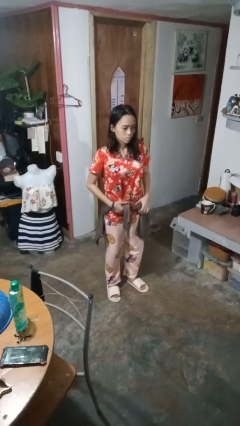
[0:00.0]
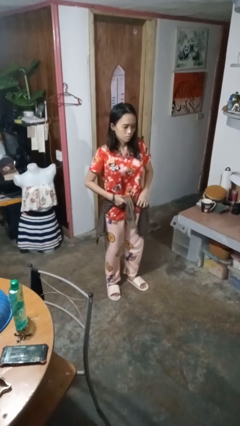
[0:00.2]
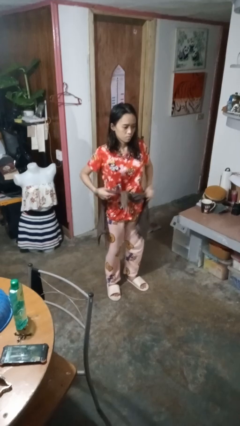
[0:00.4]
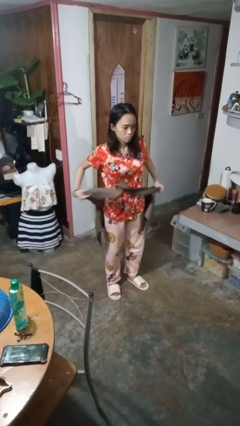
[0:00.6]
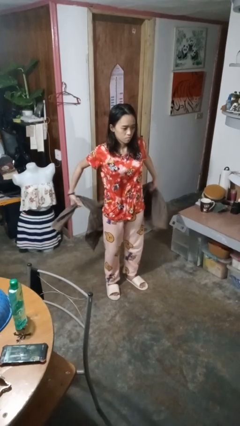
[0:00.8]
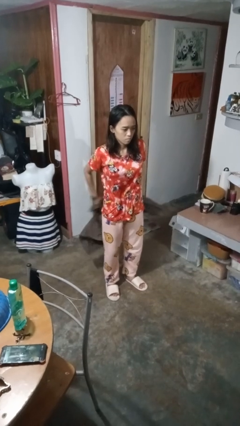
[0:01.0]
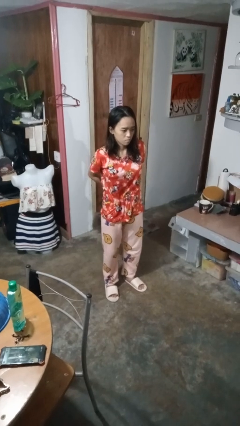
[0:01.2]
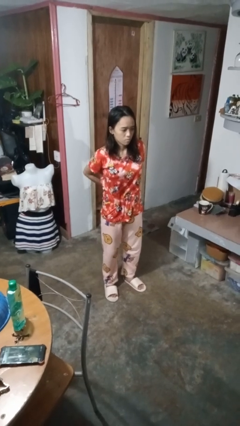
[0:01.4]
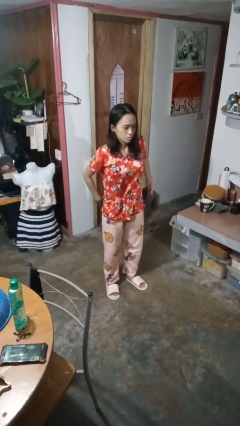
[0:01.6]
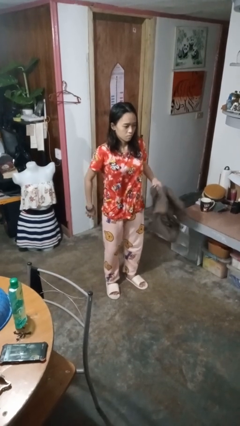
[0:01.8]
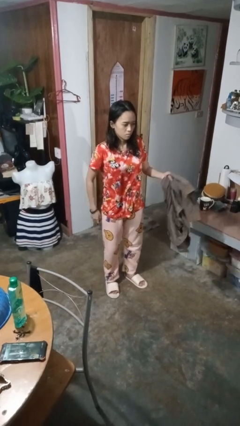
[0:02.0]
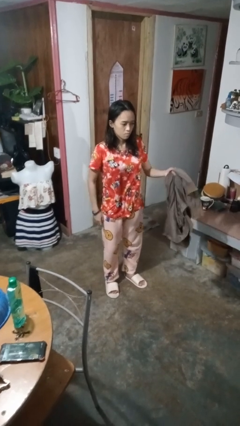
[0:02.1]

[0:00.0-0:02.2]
person unties jacket around waist

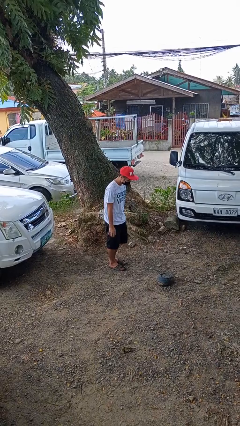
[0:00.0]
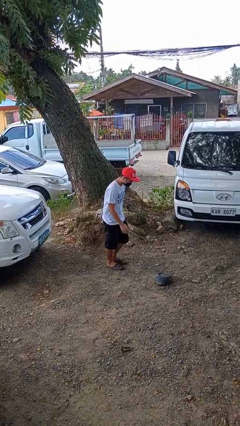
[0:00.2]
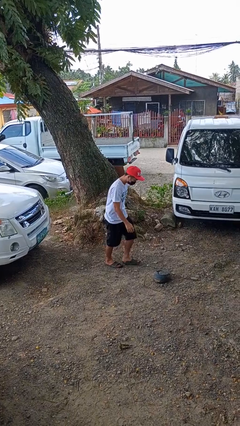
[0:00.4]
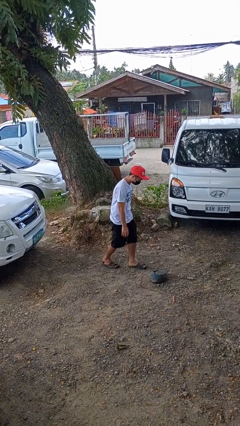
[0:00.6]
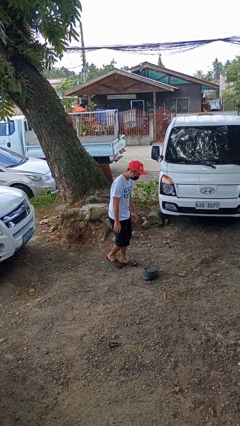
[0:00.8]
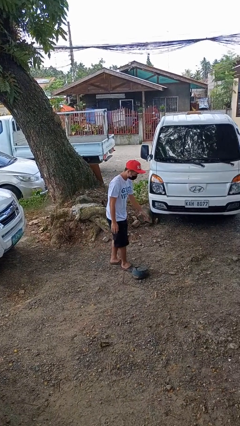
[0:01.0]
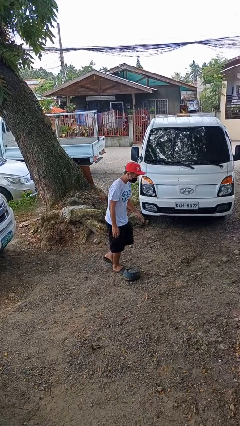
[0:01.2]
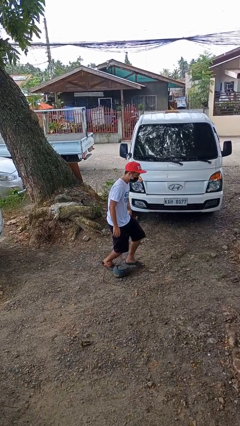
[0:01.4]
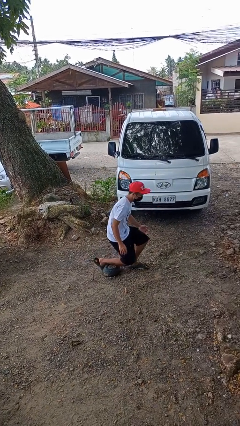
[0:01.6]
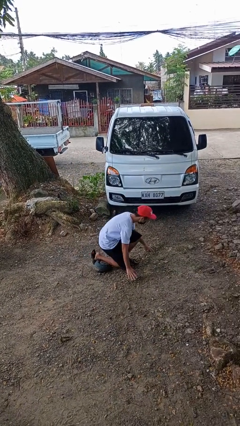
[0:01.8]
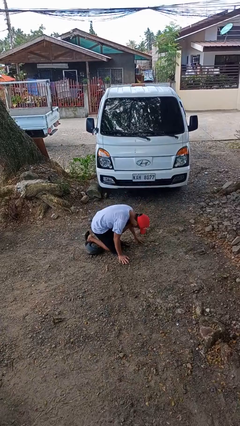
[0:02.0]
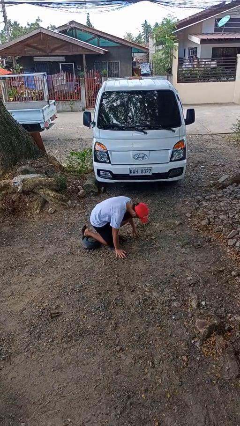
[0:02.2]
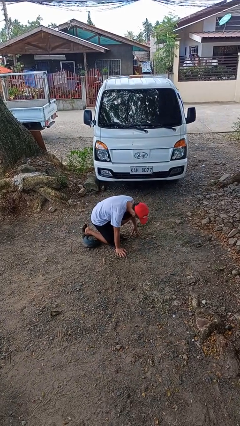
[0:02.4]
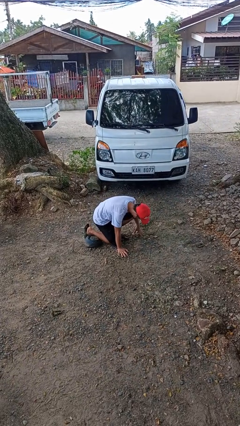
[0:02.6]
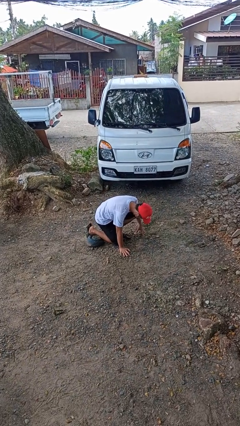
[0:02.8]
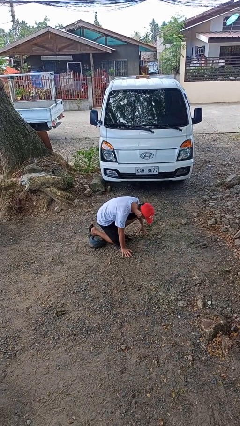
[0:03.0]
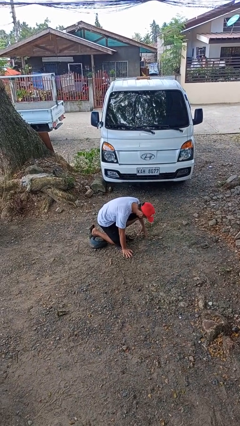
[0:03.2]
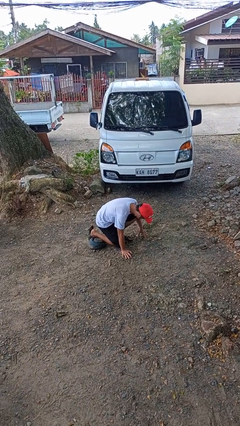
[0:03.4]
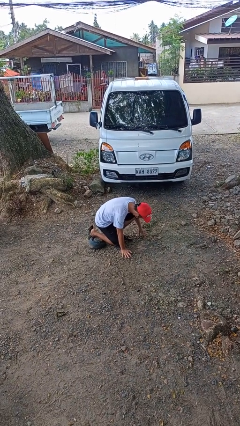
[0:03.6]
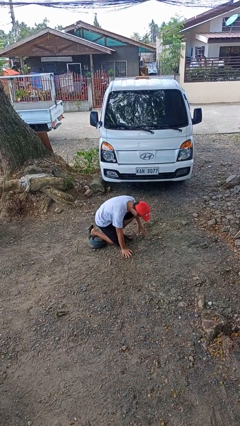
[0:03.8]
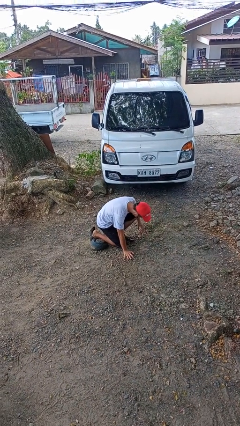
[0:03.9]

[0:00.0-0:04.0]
person trips on object on floor

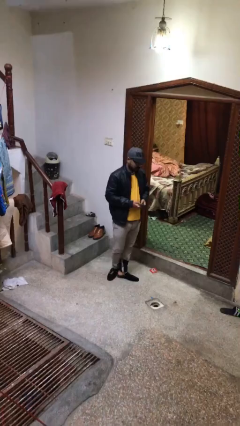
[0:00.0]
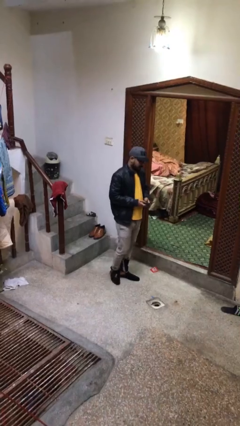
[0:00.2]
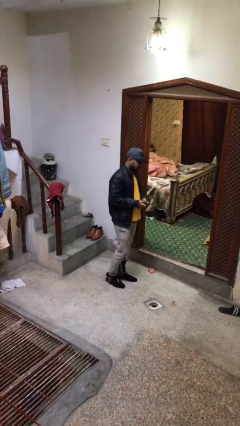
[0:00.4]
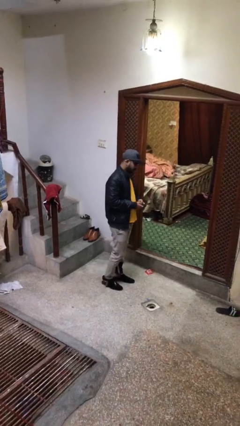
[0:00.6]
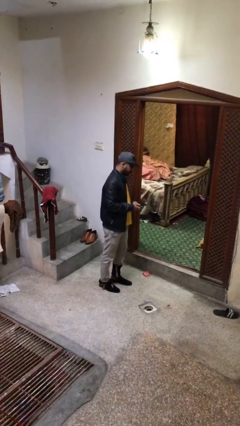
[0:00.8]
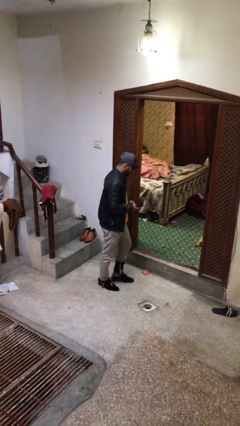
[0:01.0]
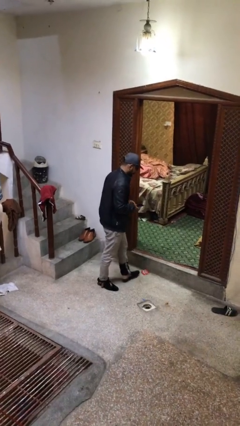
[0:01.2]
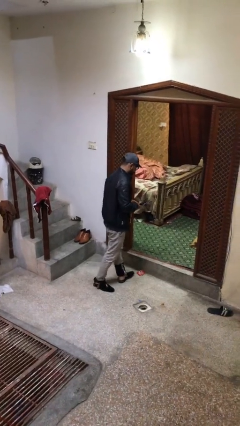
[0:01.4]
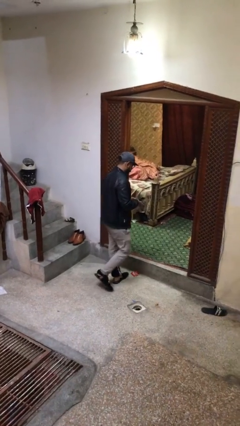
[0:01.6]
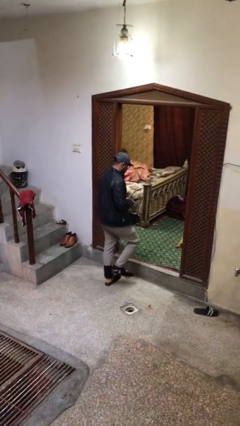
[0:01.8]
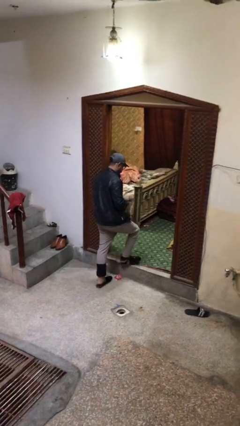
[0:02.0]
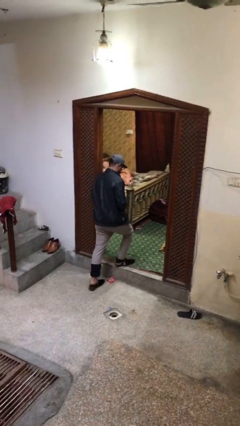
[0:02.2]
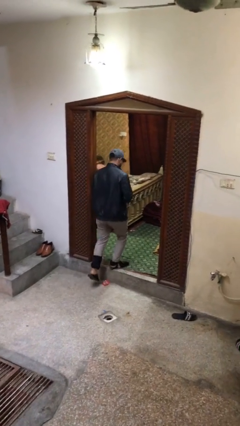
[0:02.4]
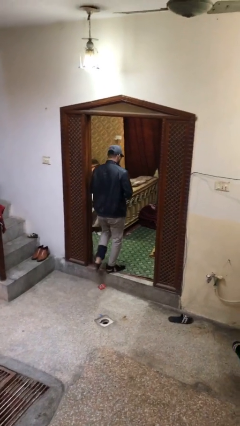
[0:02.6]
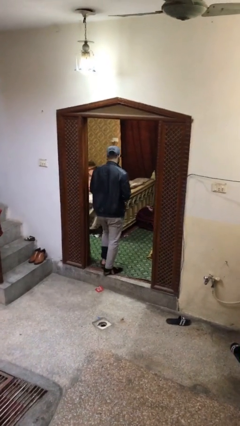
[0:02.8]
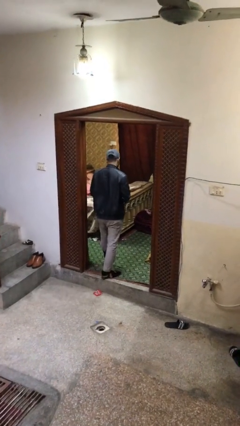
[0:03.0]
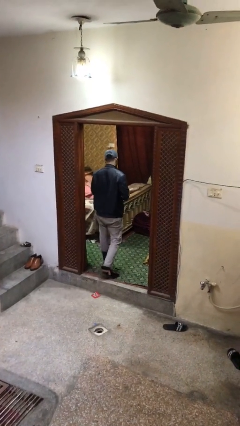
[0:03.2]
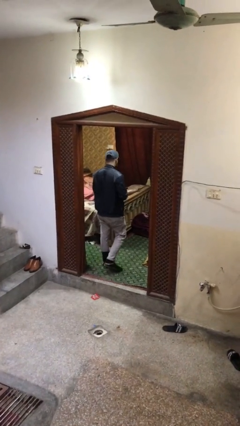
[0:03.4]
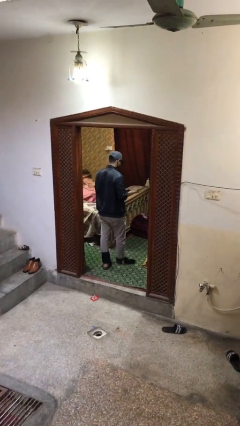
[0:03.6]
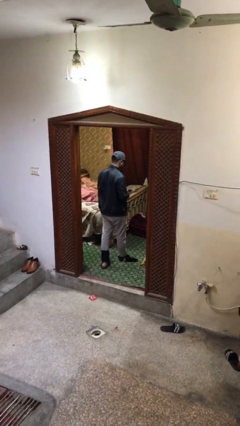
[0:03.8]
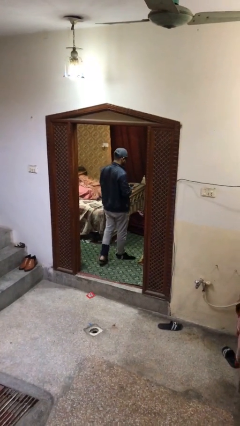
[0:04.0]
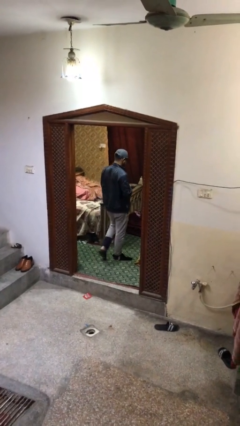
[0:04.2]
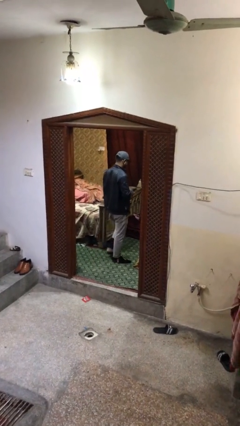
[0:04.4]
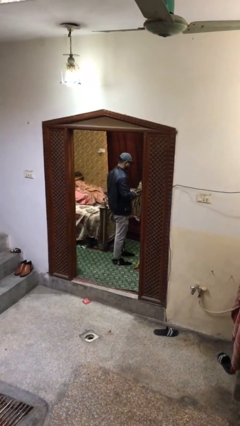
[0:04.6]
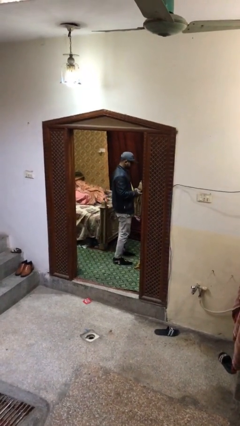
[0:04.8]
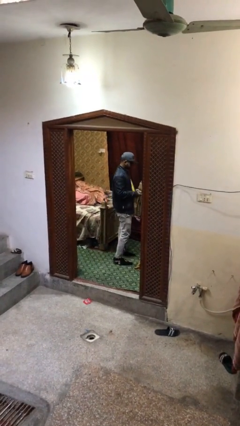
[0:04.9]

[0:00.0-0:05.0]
person exits scene through structure

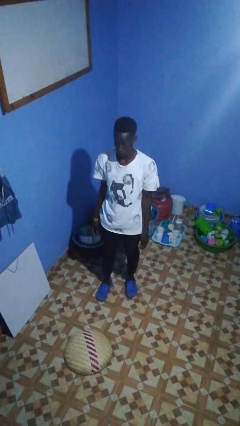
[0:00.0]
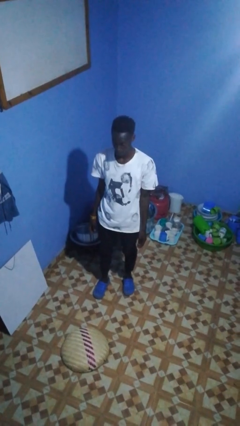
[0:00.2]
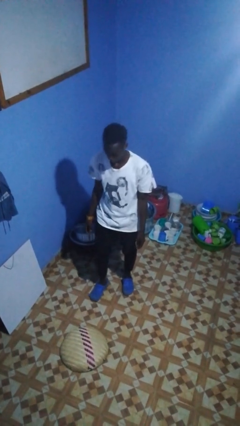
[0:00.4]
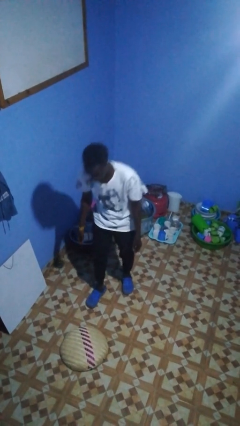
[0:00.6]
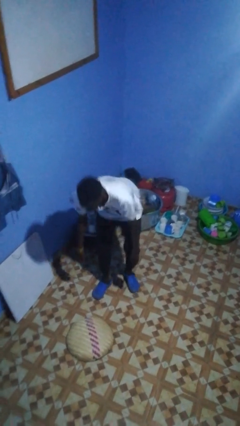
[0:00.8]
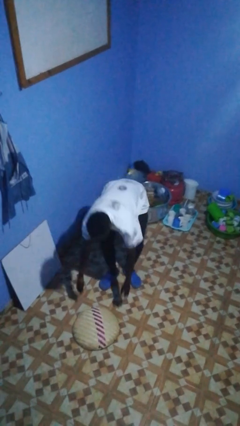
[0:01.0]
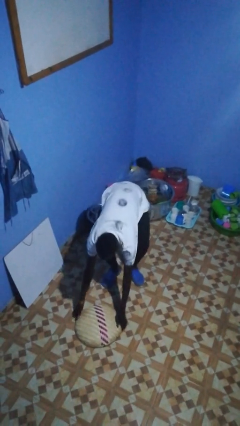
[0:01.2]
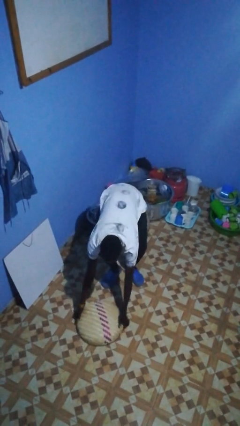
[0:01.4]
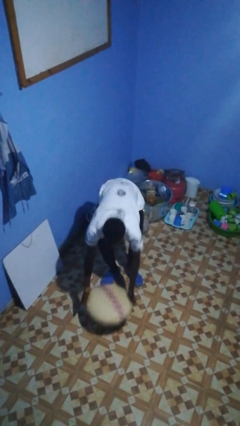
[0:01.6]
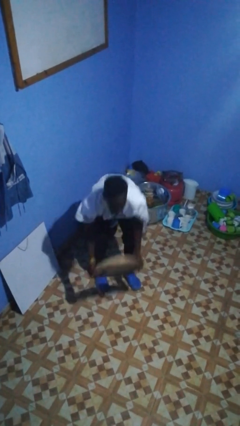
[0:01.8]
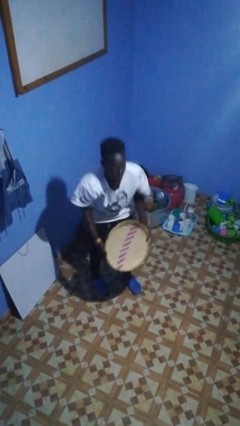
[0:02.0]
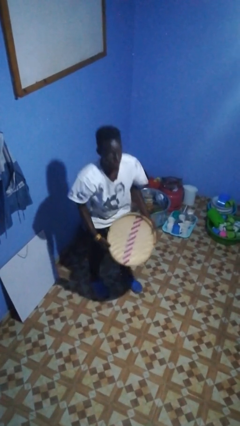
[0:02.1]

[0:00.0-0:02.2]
person picks up object from floor

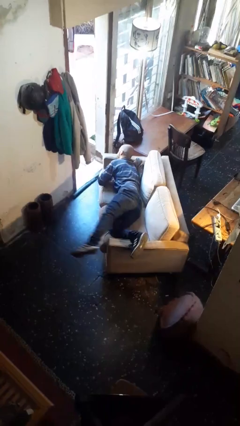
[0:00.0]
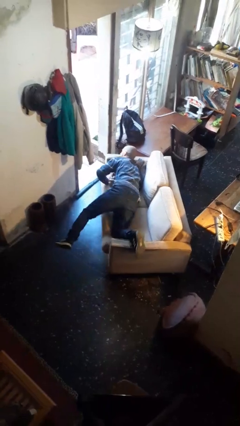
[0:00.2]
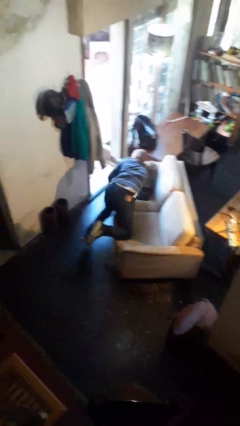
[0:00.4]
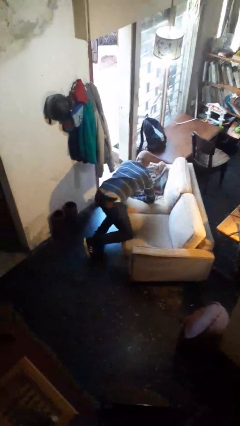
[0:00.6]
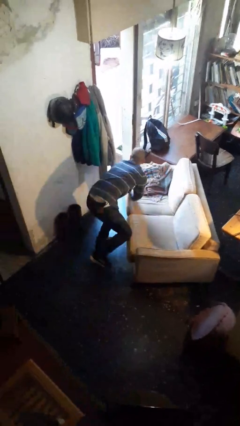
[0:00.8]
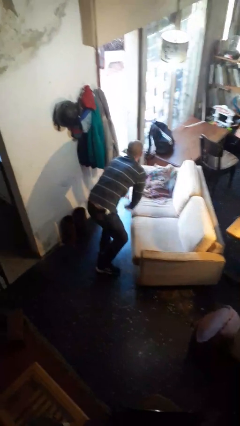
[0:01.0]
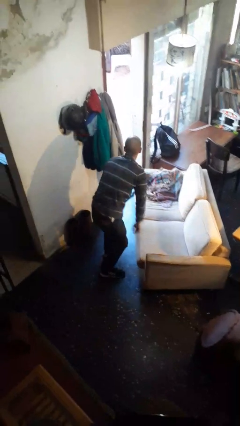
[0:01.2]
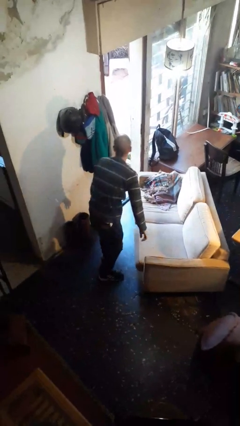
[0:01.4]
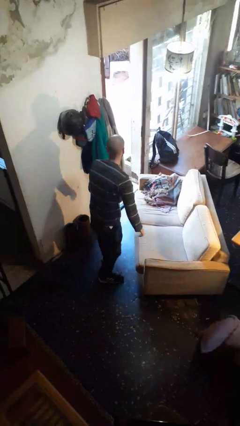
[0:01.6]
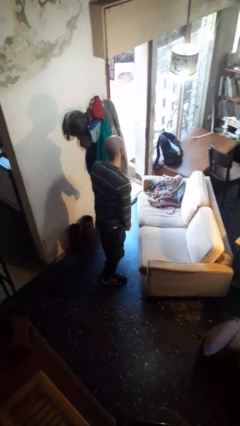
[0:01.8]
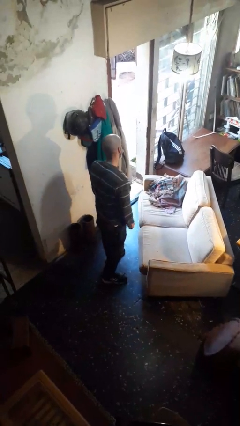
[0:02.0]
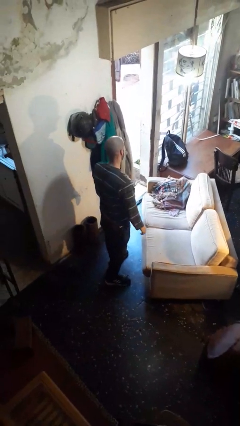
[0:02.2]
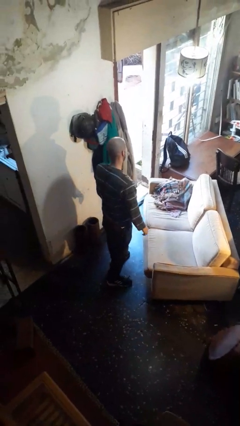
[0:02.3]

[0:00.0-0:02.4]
person stands up

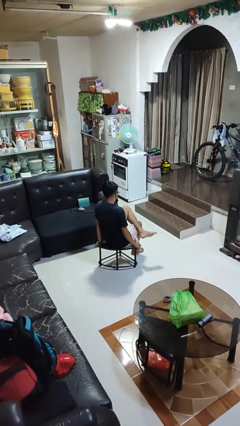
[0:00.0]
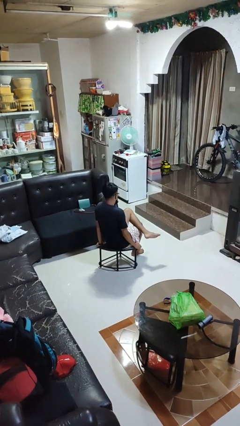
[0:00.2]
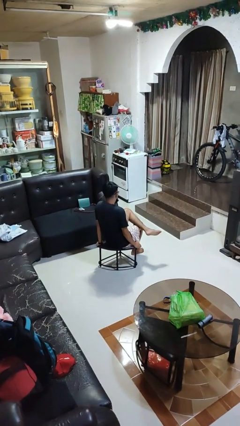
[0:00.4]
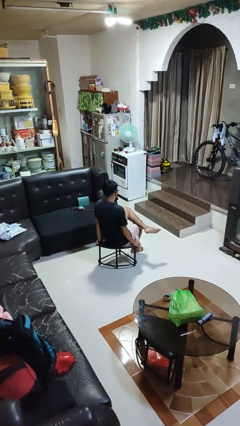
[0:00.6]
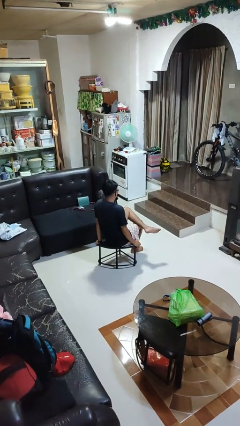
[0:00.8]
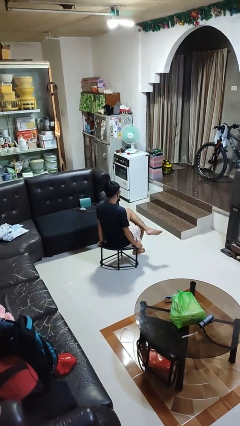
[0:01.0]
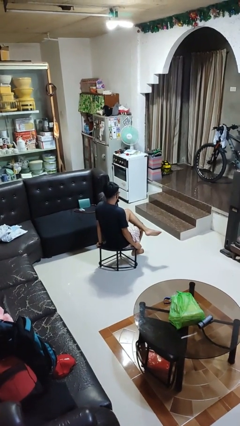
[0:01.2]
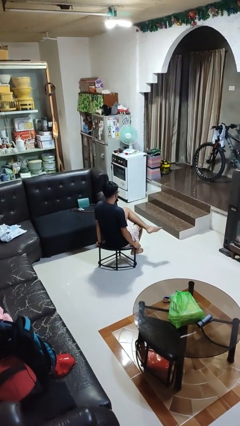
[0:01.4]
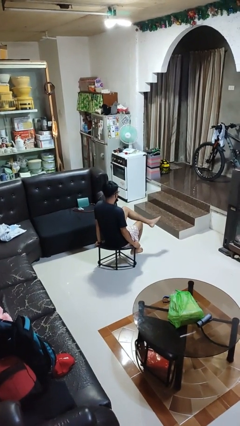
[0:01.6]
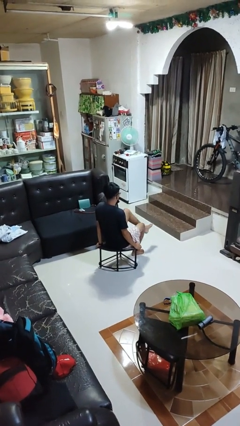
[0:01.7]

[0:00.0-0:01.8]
person crosses legs
